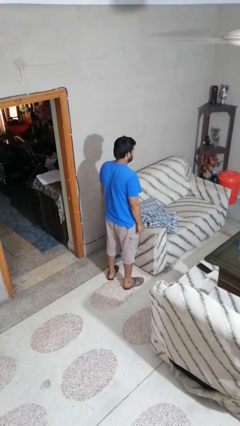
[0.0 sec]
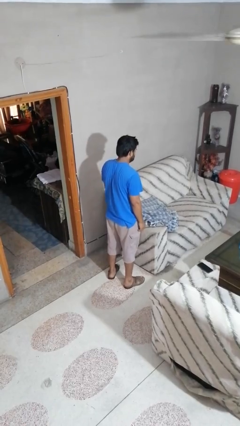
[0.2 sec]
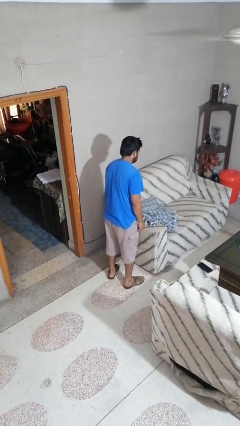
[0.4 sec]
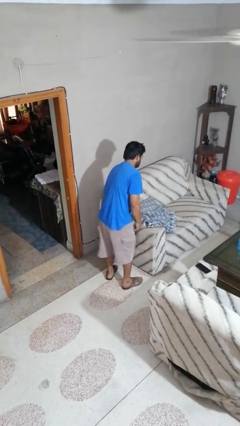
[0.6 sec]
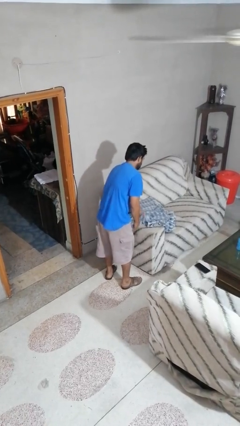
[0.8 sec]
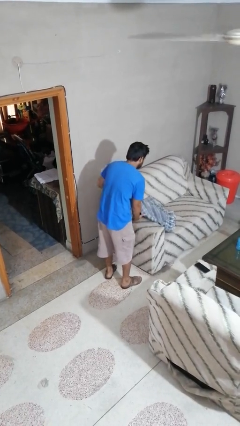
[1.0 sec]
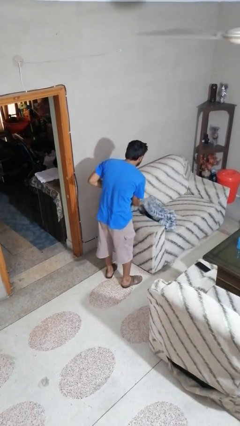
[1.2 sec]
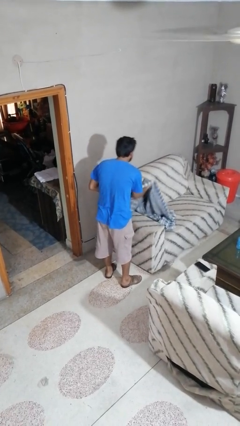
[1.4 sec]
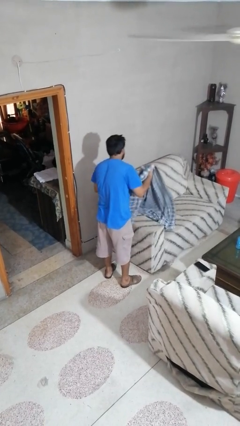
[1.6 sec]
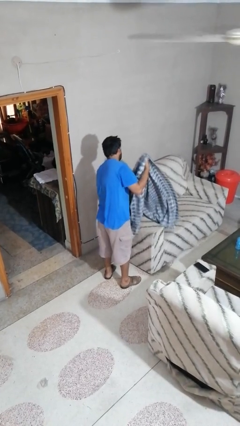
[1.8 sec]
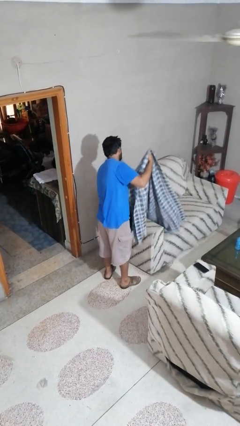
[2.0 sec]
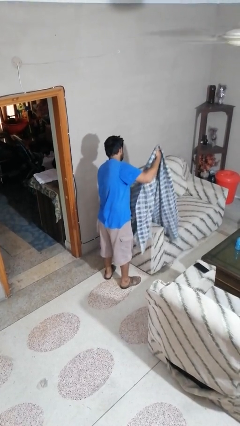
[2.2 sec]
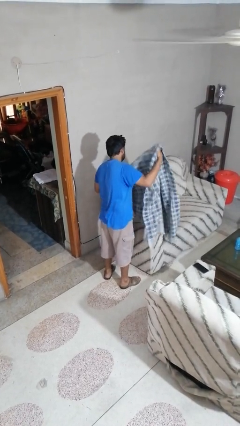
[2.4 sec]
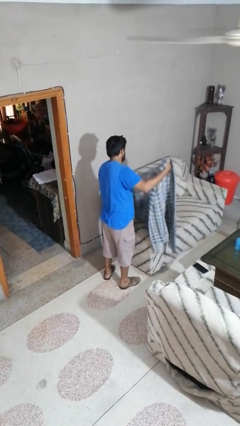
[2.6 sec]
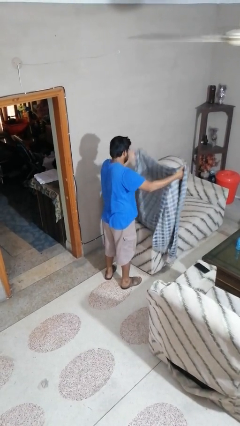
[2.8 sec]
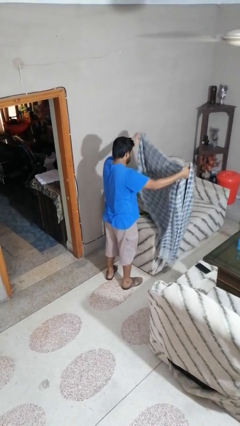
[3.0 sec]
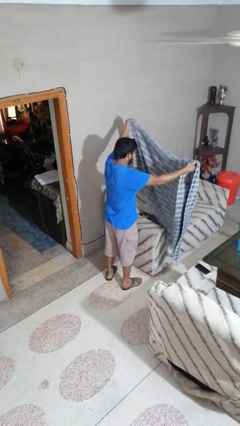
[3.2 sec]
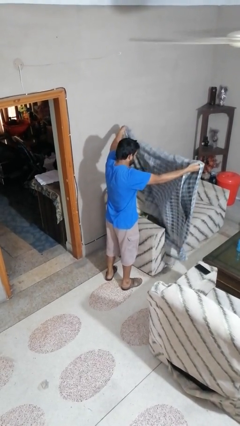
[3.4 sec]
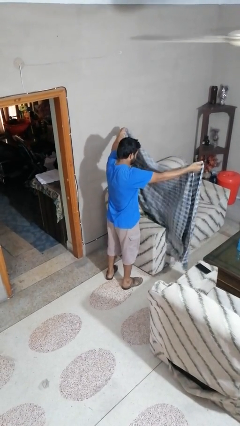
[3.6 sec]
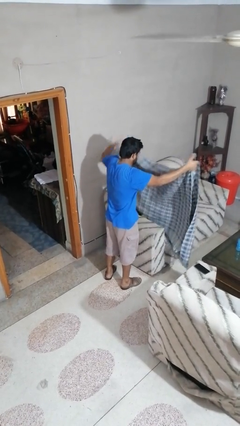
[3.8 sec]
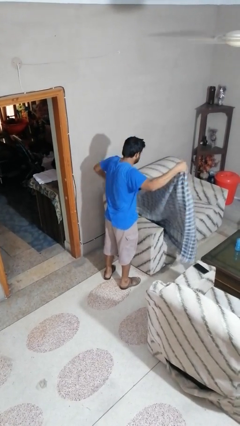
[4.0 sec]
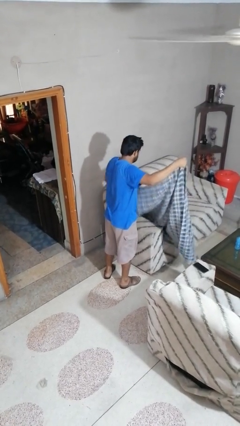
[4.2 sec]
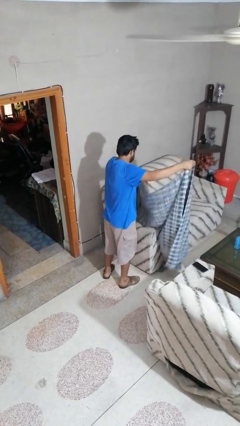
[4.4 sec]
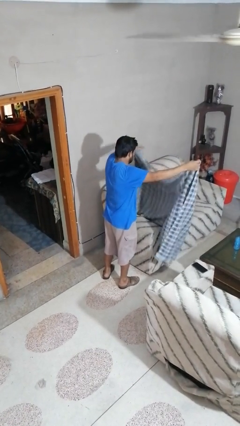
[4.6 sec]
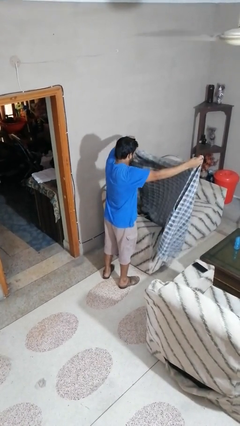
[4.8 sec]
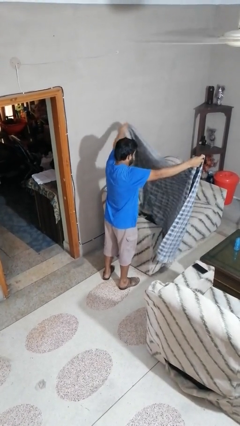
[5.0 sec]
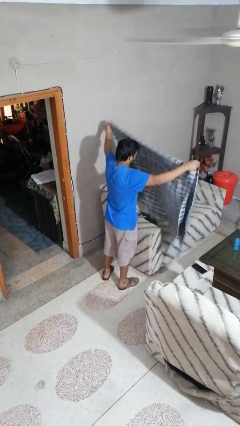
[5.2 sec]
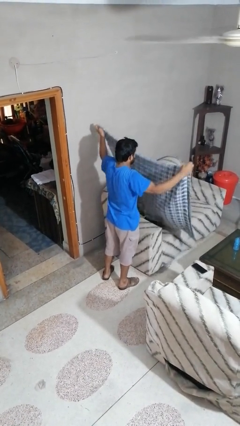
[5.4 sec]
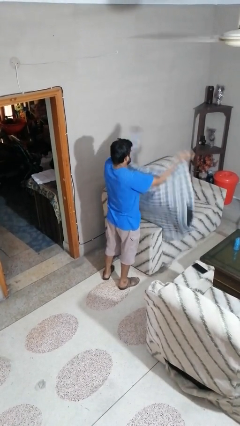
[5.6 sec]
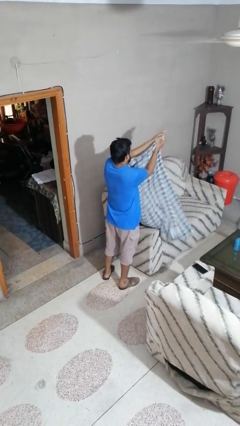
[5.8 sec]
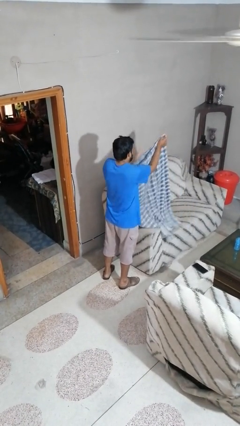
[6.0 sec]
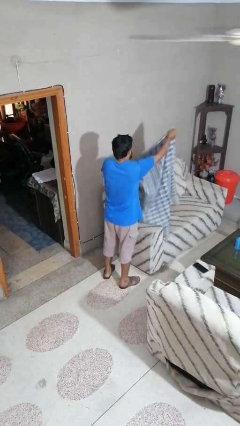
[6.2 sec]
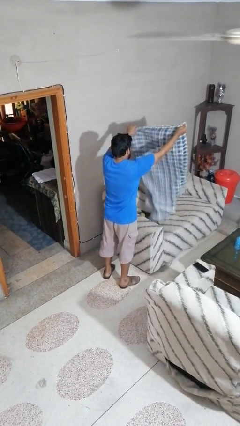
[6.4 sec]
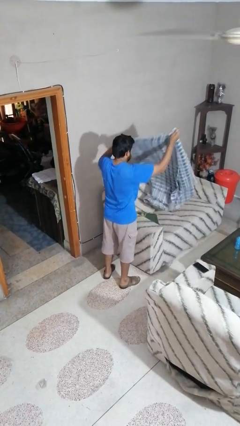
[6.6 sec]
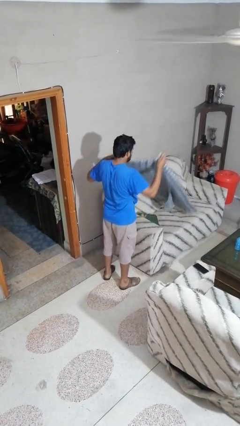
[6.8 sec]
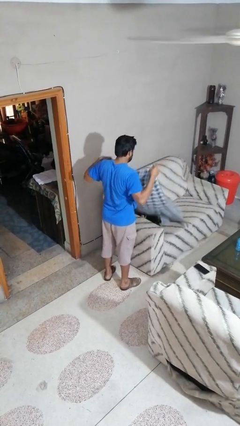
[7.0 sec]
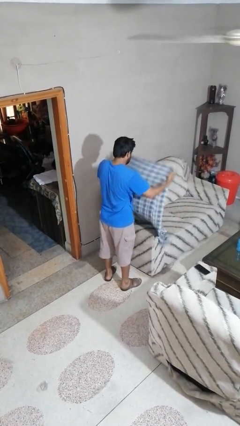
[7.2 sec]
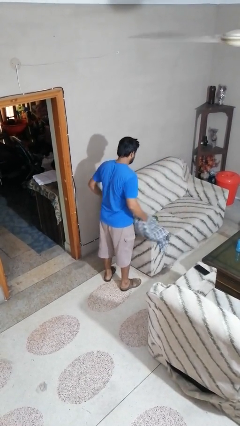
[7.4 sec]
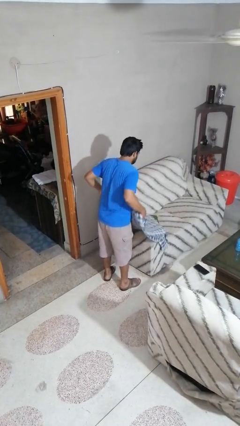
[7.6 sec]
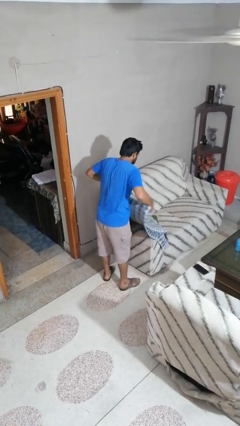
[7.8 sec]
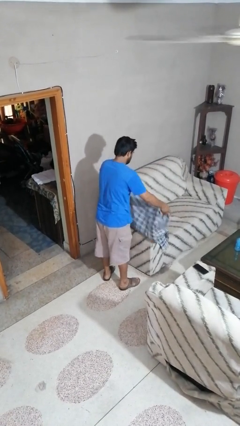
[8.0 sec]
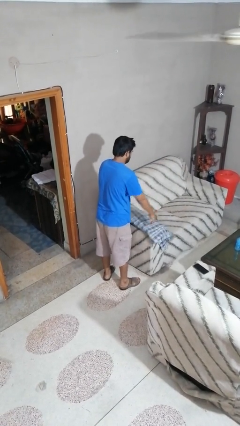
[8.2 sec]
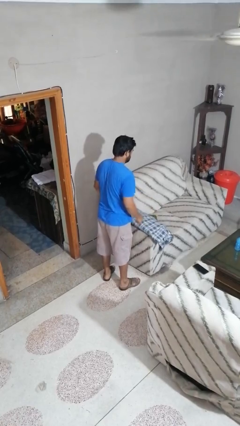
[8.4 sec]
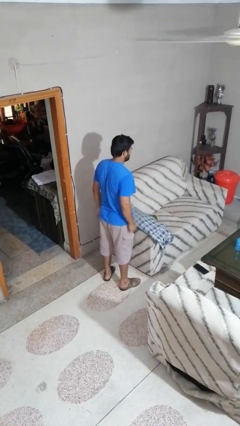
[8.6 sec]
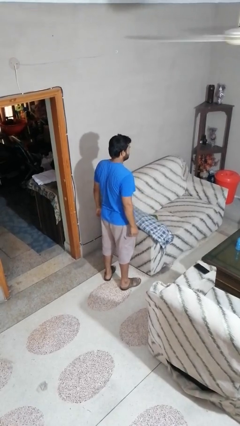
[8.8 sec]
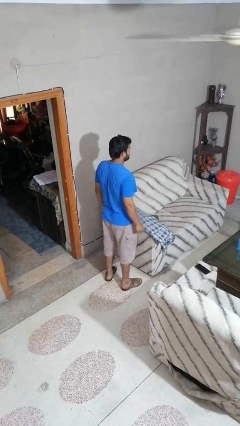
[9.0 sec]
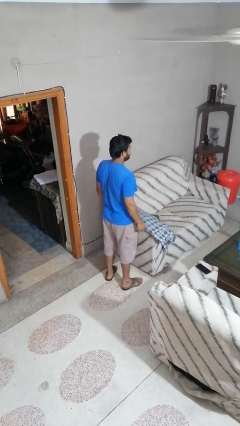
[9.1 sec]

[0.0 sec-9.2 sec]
person folds blanket

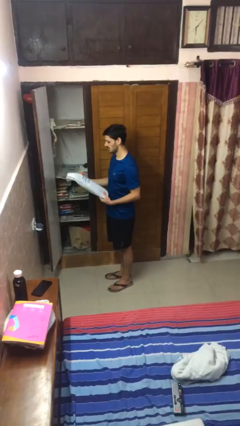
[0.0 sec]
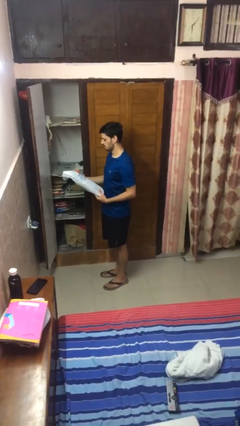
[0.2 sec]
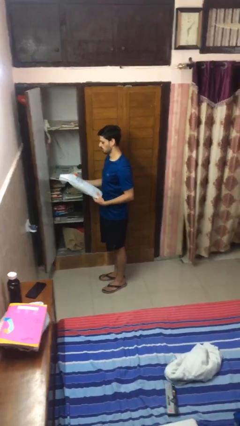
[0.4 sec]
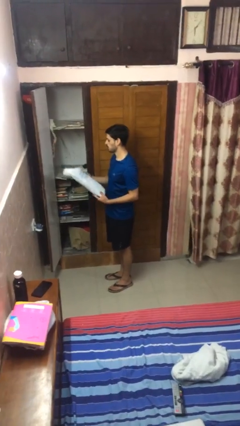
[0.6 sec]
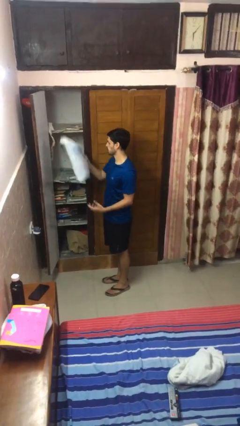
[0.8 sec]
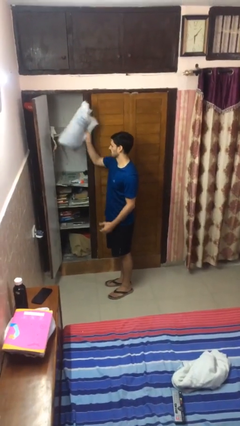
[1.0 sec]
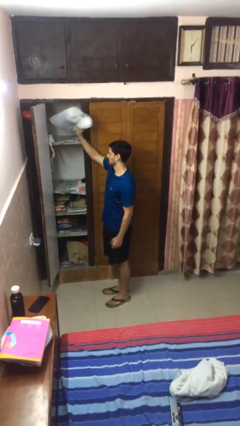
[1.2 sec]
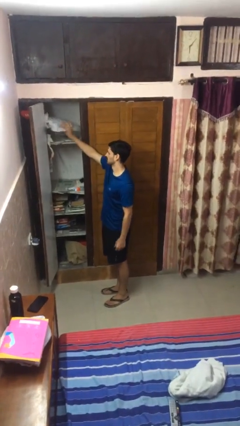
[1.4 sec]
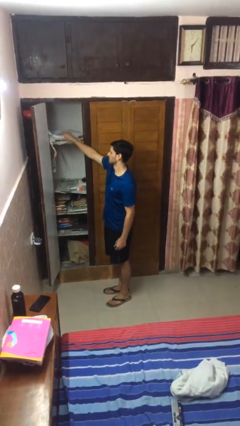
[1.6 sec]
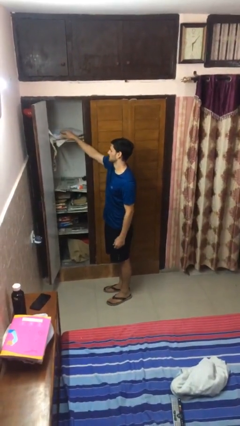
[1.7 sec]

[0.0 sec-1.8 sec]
person puts down object on shelf

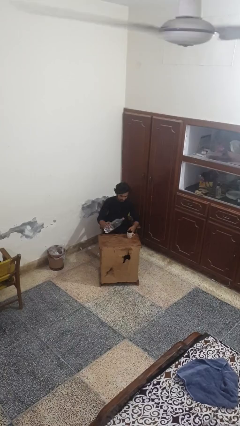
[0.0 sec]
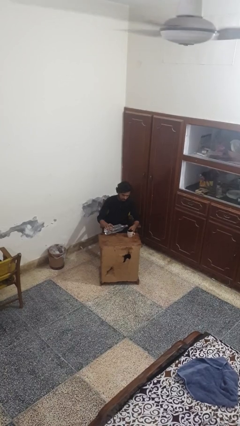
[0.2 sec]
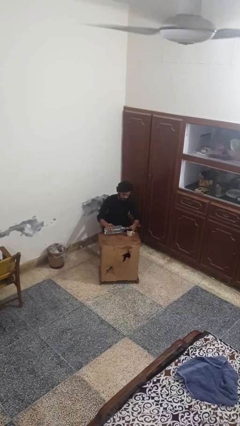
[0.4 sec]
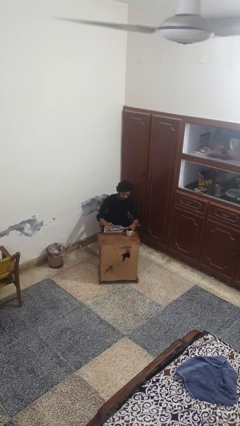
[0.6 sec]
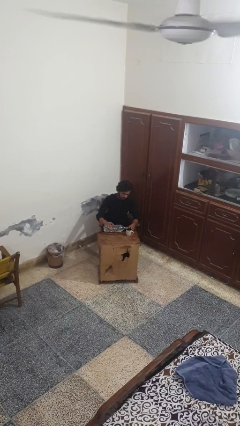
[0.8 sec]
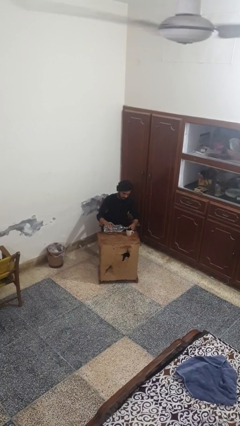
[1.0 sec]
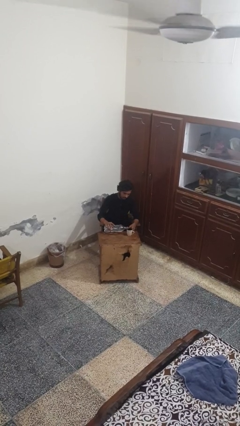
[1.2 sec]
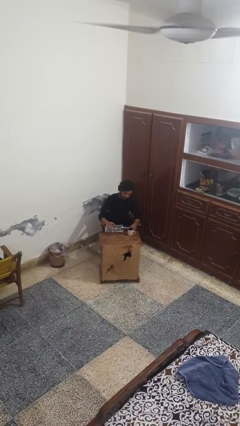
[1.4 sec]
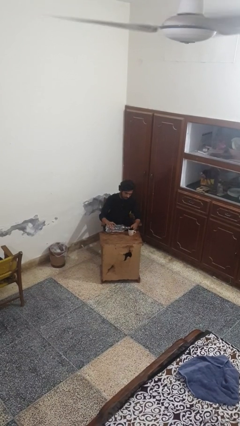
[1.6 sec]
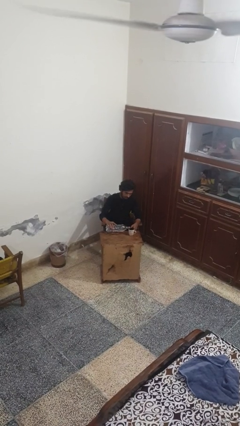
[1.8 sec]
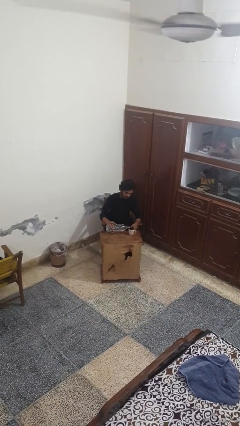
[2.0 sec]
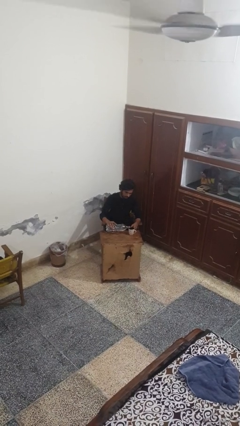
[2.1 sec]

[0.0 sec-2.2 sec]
person pours liquid into cup

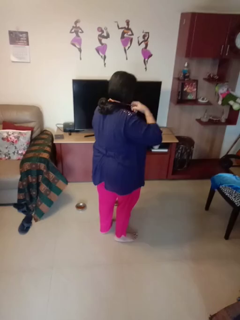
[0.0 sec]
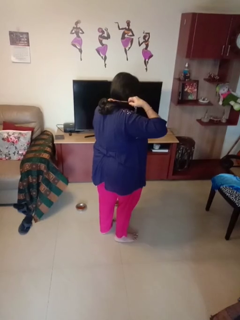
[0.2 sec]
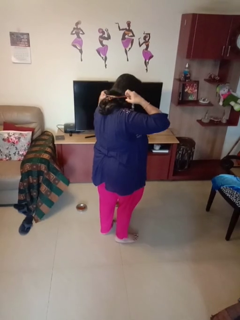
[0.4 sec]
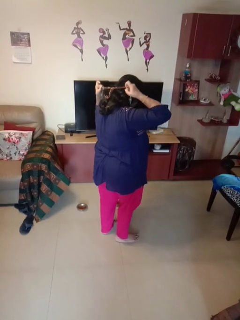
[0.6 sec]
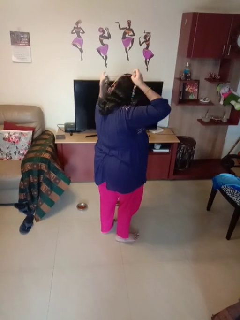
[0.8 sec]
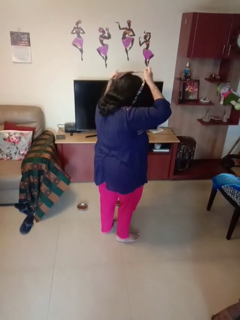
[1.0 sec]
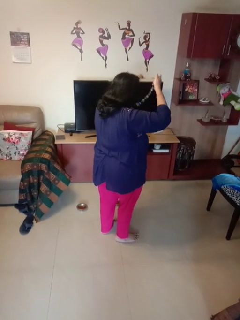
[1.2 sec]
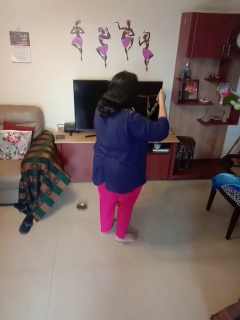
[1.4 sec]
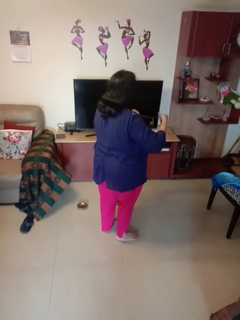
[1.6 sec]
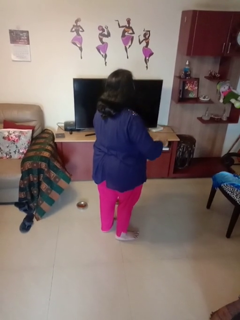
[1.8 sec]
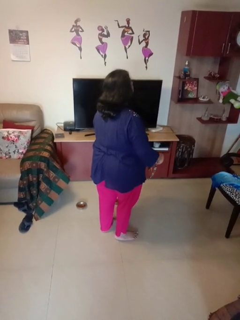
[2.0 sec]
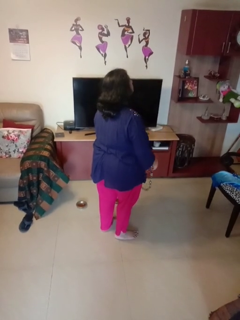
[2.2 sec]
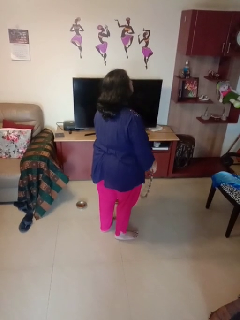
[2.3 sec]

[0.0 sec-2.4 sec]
person takes off necklace

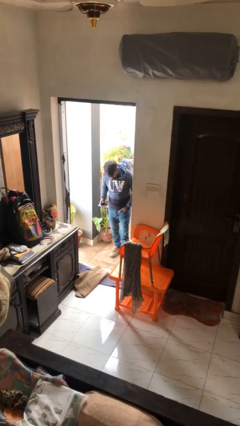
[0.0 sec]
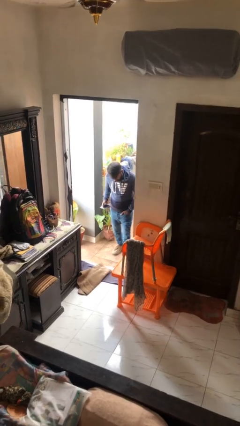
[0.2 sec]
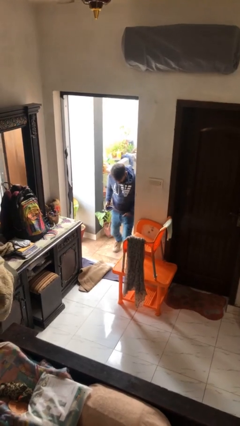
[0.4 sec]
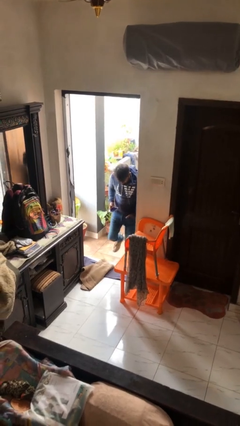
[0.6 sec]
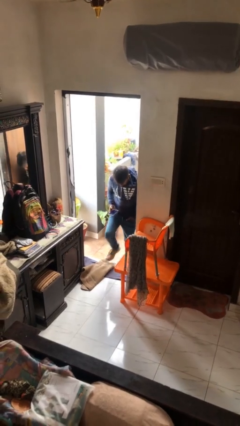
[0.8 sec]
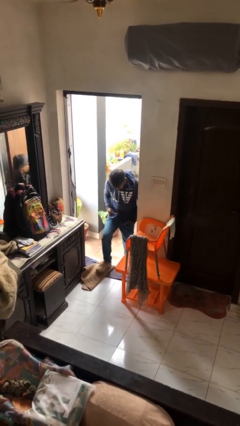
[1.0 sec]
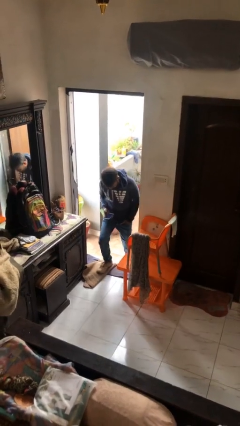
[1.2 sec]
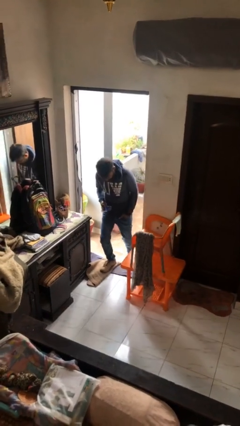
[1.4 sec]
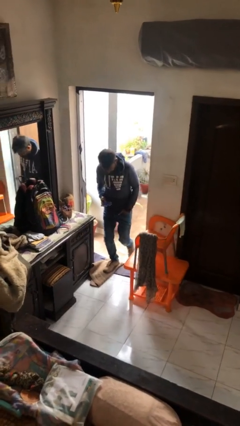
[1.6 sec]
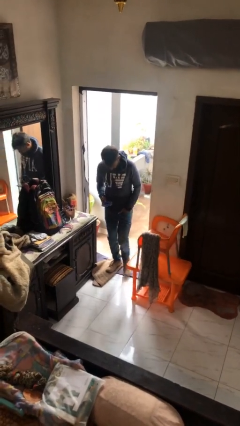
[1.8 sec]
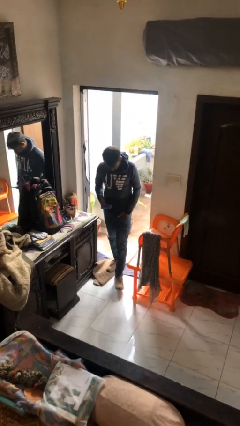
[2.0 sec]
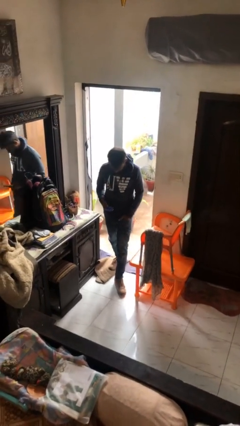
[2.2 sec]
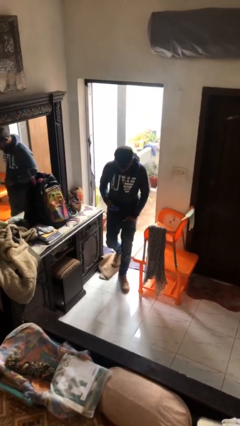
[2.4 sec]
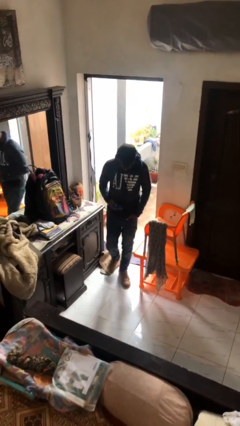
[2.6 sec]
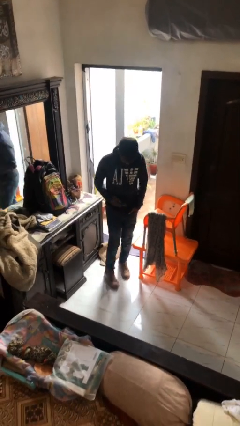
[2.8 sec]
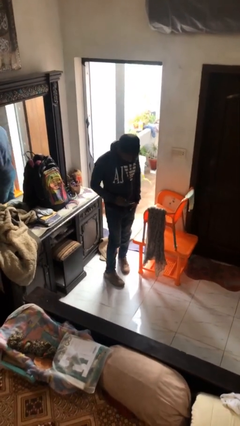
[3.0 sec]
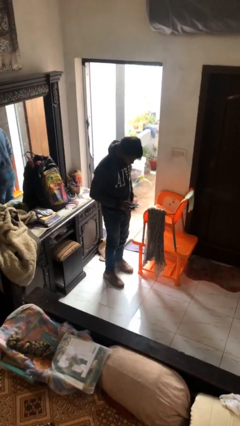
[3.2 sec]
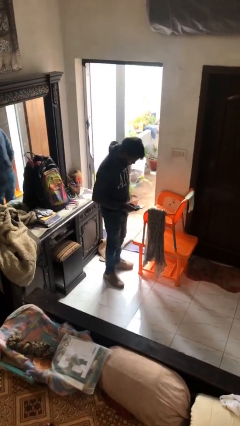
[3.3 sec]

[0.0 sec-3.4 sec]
person enters scene through structure
